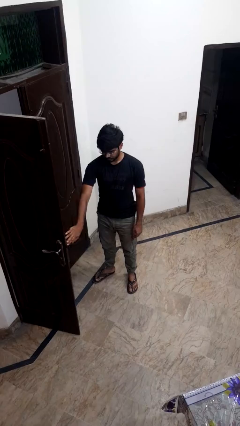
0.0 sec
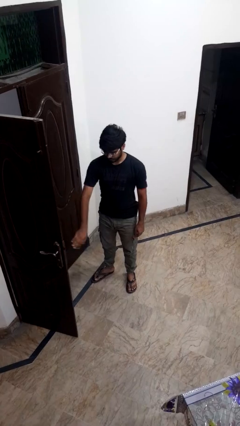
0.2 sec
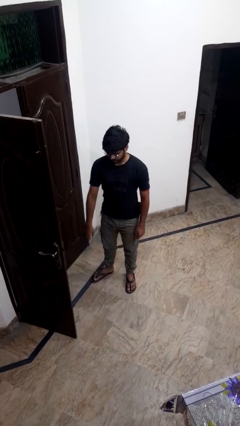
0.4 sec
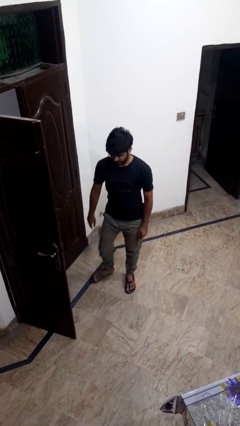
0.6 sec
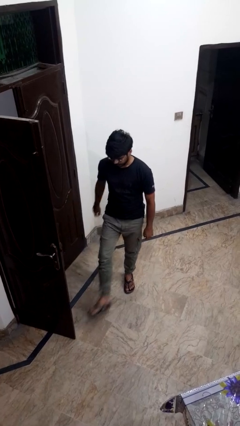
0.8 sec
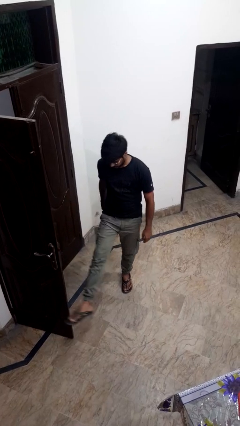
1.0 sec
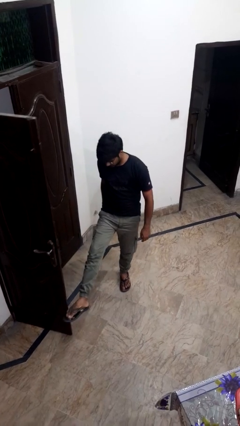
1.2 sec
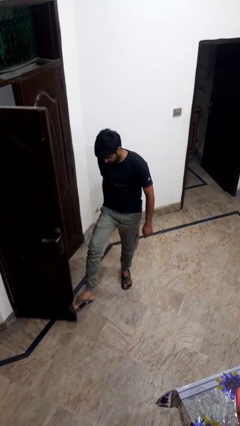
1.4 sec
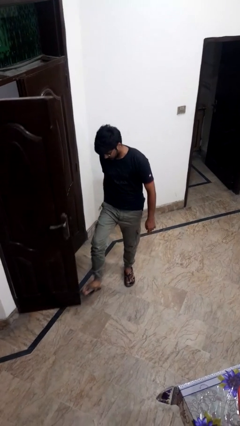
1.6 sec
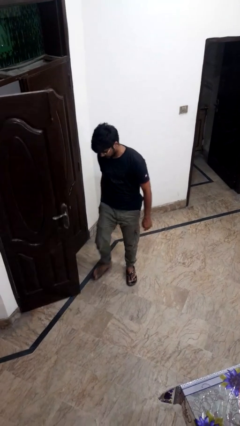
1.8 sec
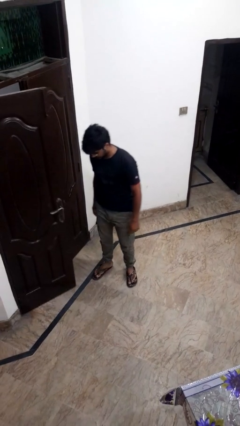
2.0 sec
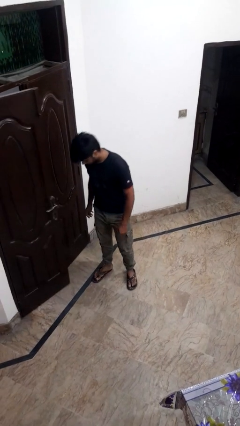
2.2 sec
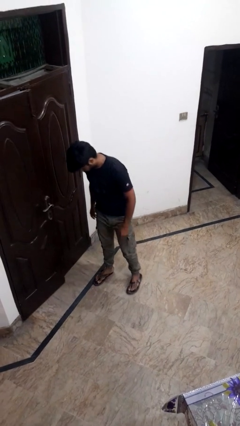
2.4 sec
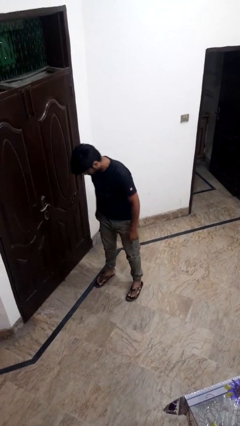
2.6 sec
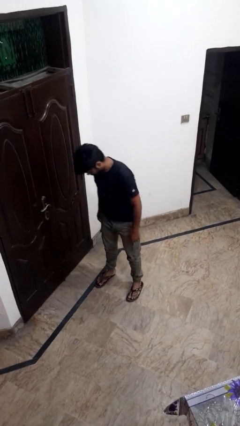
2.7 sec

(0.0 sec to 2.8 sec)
person closes door with foot

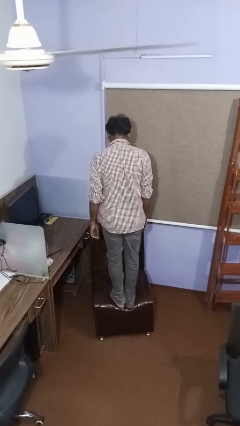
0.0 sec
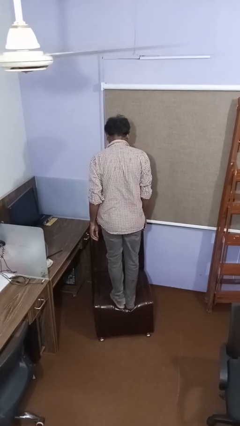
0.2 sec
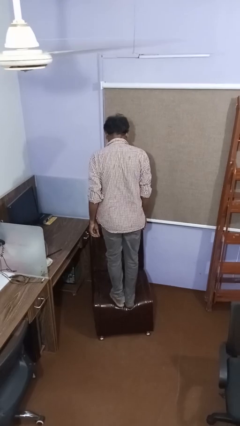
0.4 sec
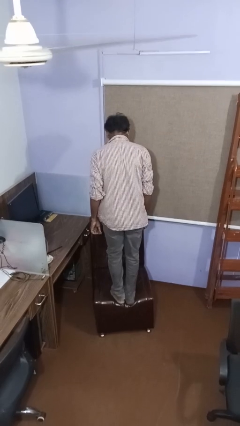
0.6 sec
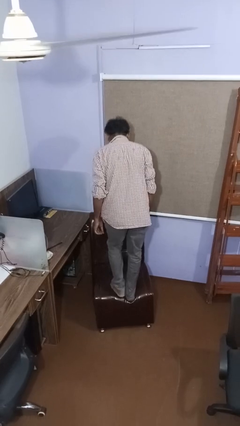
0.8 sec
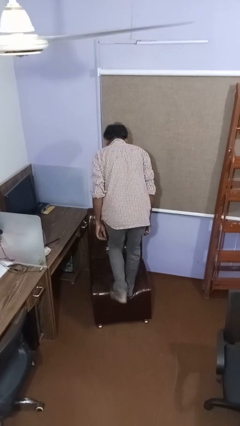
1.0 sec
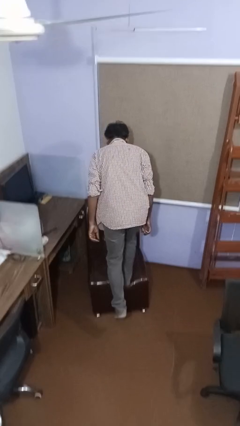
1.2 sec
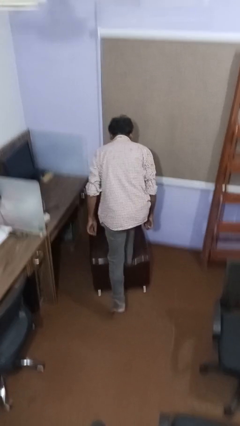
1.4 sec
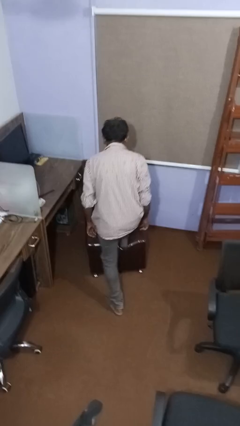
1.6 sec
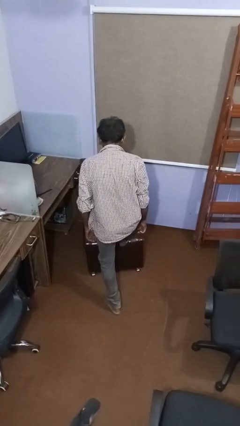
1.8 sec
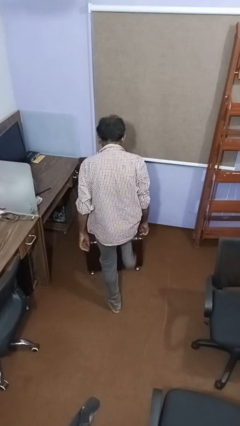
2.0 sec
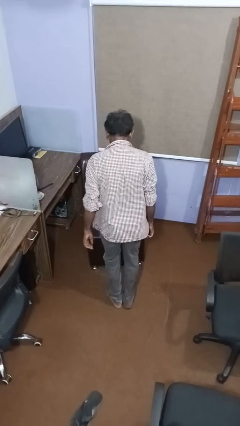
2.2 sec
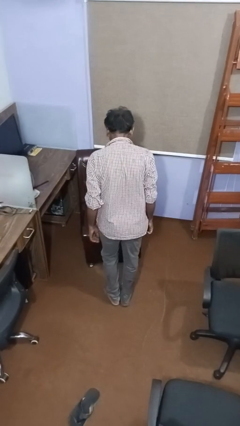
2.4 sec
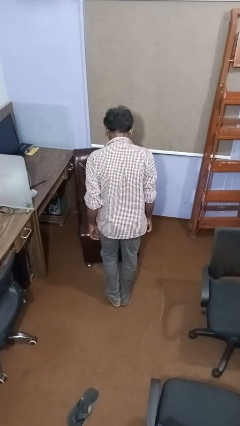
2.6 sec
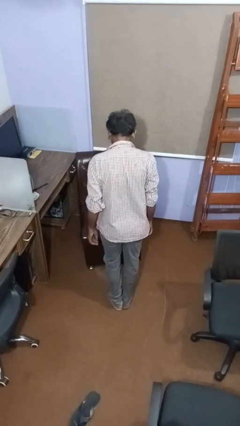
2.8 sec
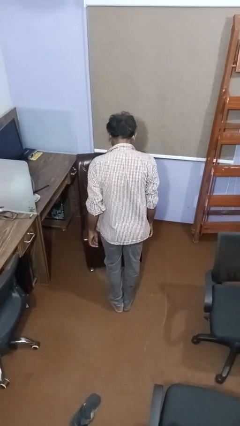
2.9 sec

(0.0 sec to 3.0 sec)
person climbs off couch

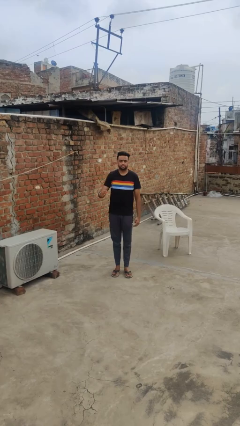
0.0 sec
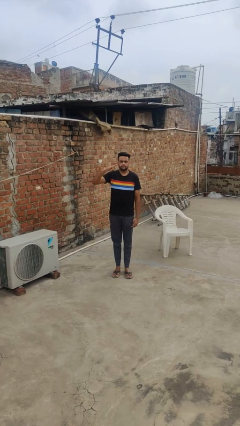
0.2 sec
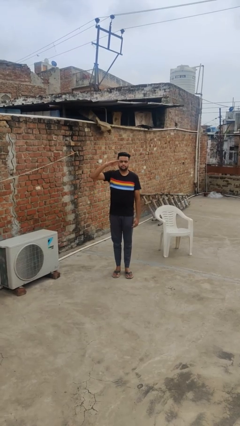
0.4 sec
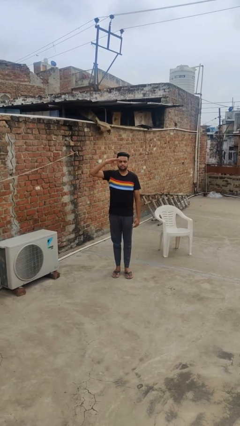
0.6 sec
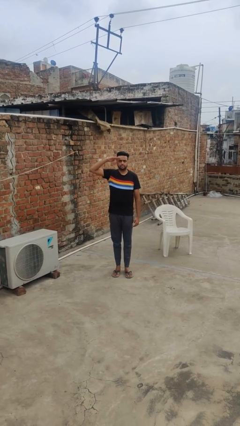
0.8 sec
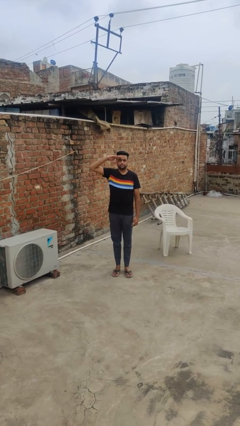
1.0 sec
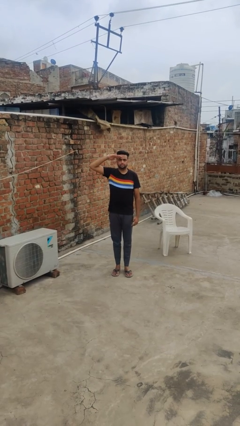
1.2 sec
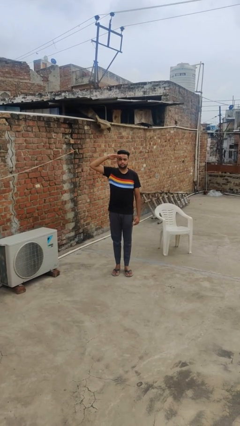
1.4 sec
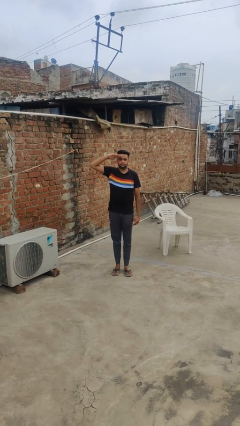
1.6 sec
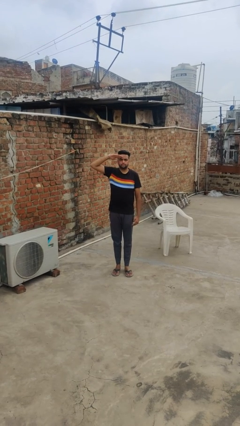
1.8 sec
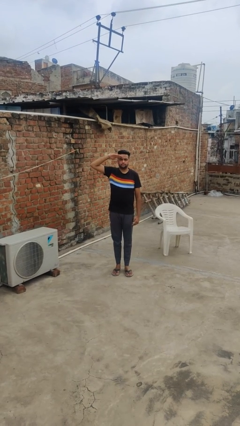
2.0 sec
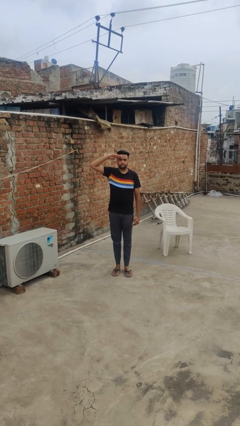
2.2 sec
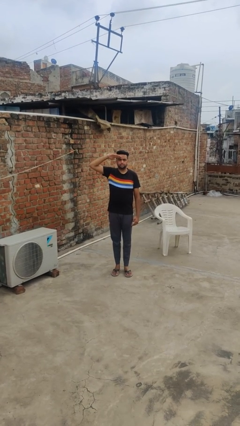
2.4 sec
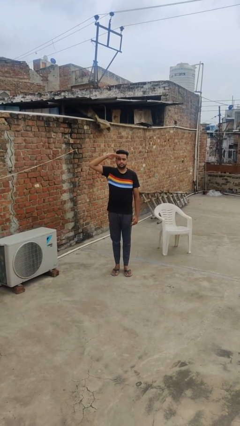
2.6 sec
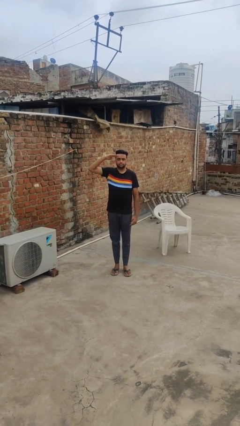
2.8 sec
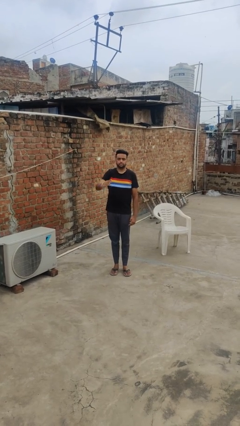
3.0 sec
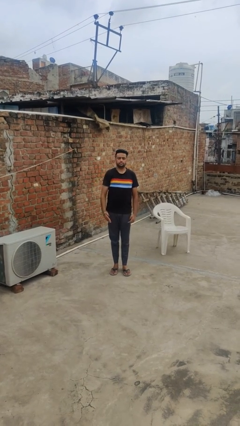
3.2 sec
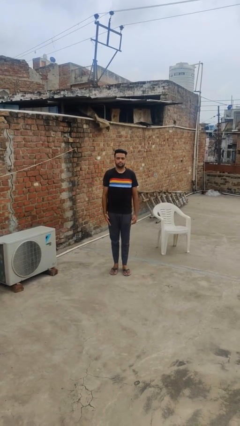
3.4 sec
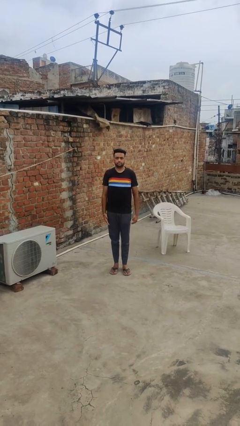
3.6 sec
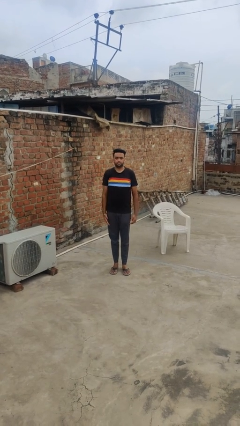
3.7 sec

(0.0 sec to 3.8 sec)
person salutes

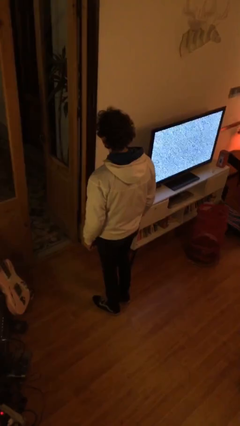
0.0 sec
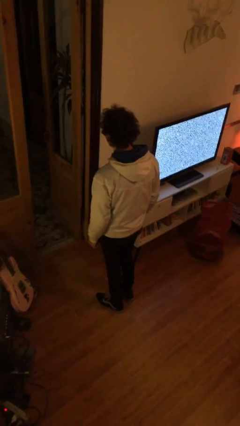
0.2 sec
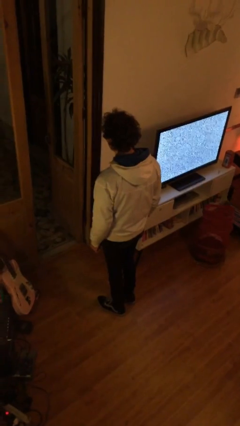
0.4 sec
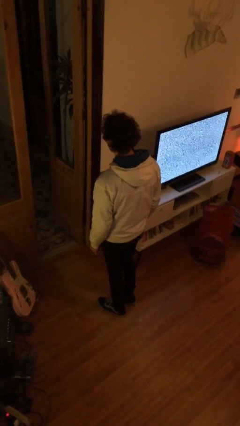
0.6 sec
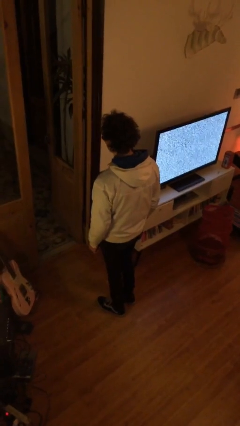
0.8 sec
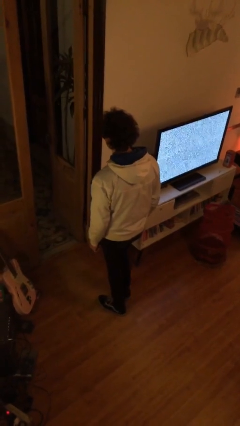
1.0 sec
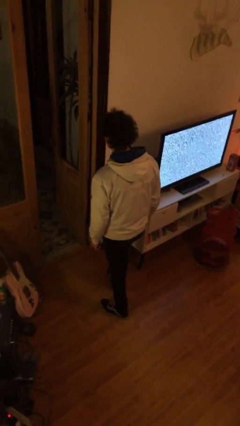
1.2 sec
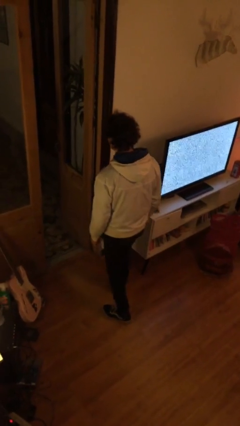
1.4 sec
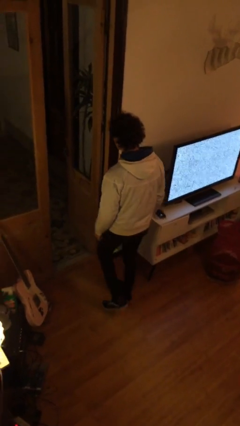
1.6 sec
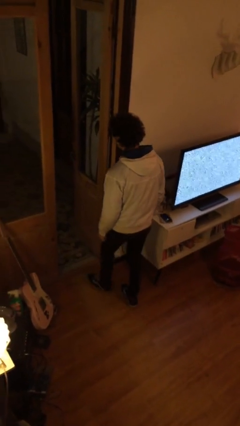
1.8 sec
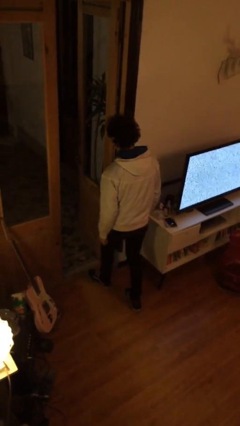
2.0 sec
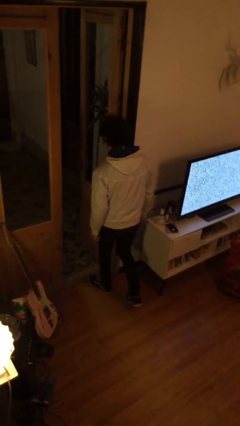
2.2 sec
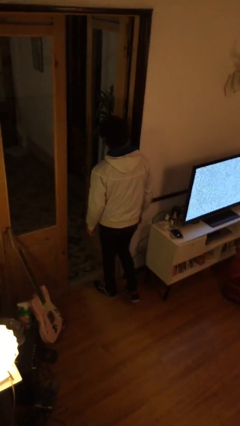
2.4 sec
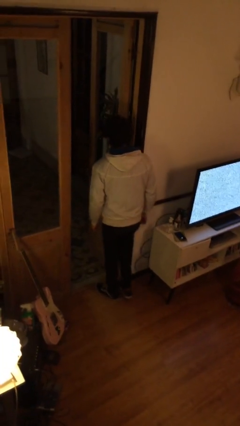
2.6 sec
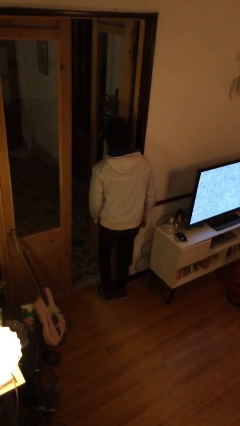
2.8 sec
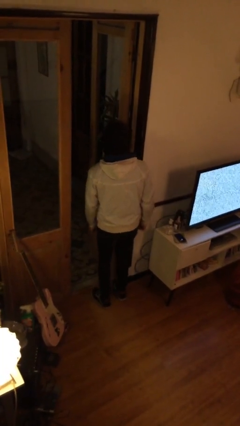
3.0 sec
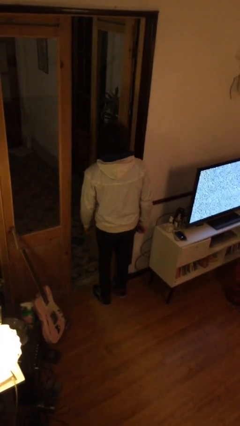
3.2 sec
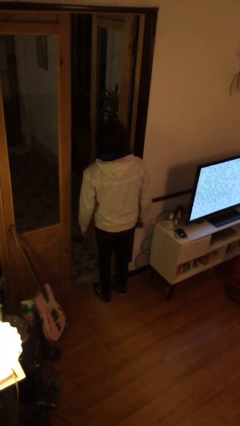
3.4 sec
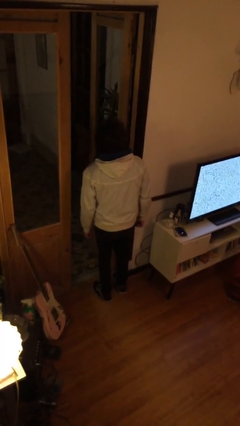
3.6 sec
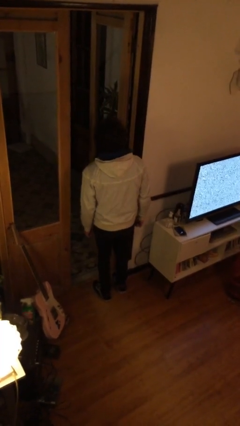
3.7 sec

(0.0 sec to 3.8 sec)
person bumps into wall

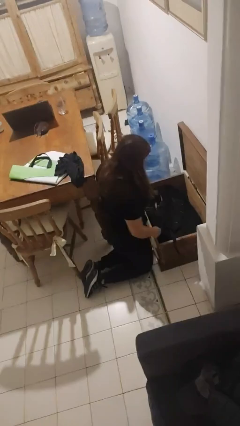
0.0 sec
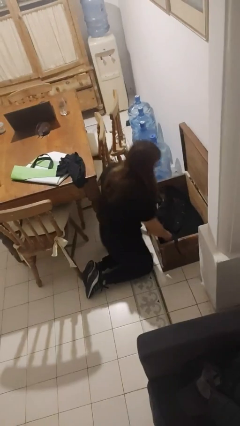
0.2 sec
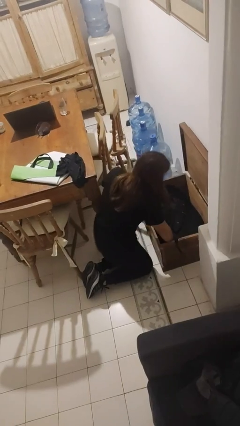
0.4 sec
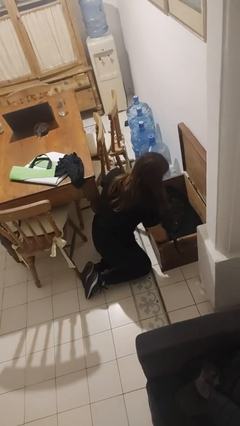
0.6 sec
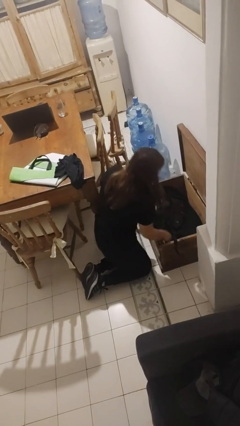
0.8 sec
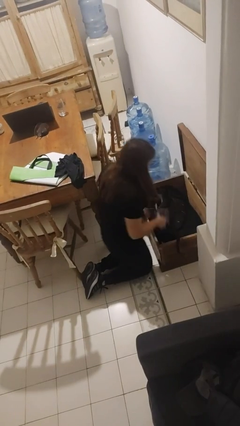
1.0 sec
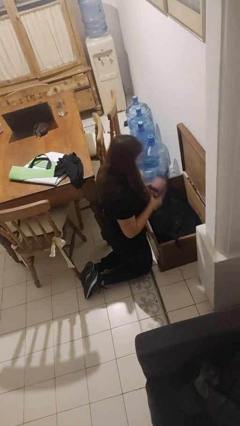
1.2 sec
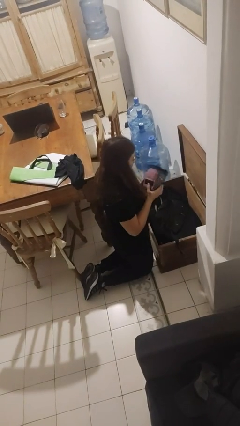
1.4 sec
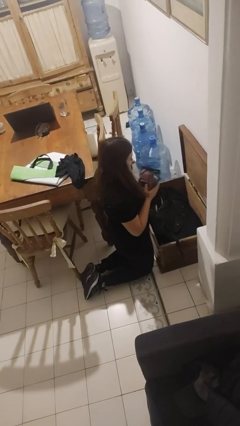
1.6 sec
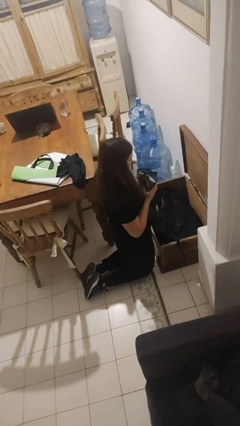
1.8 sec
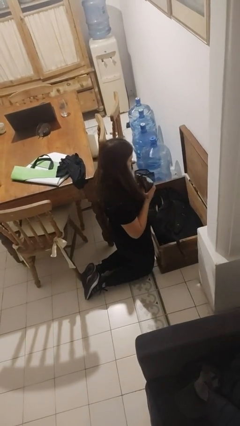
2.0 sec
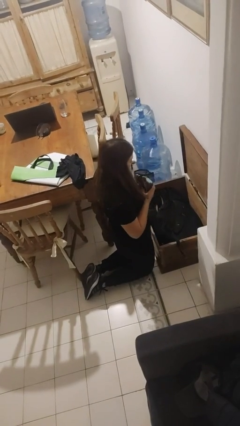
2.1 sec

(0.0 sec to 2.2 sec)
person takes object from box

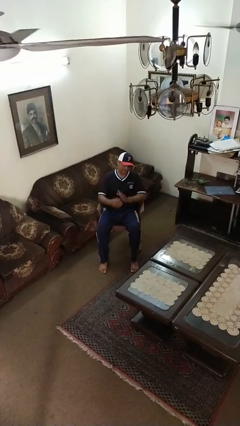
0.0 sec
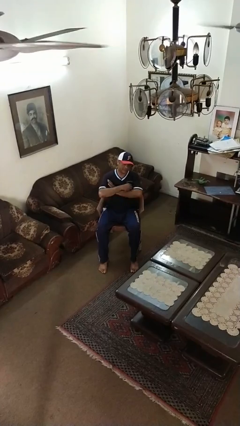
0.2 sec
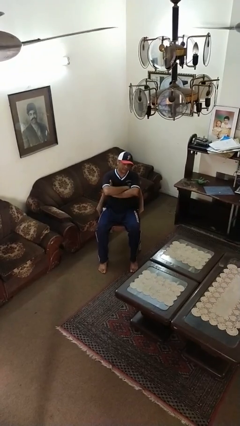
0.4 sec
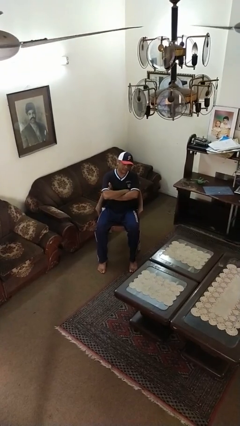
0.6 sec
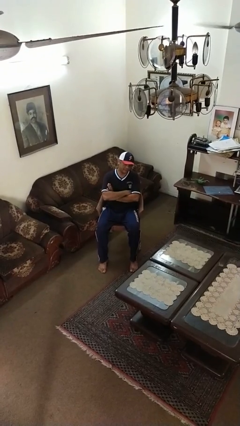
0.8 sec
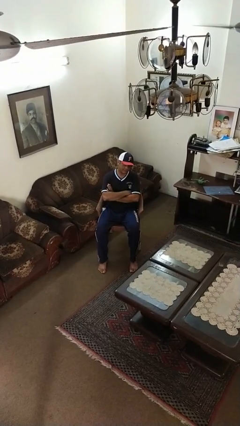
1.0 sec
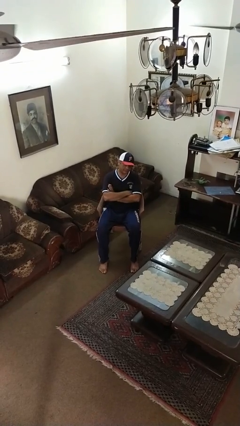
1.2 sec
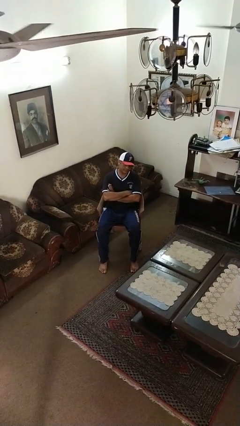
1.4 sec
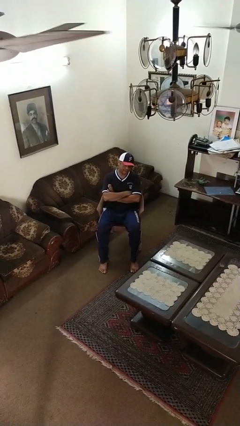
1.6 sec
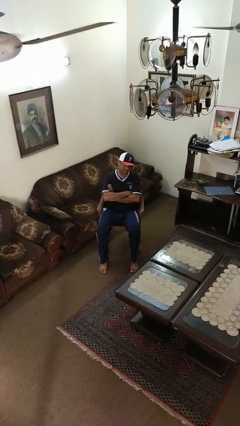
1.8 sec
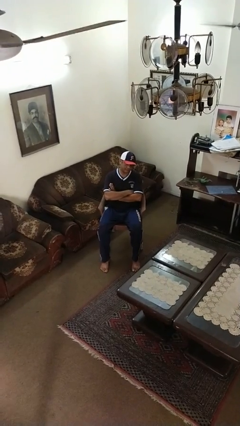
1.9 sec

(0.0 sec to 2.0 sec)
person crosses arms
